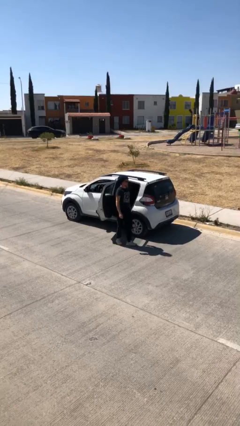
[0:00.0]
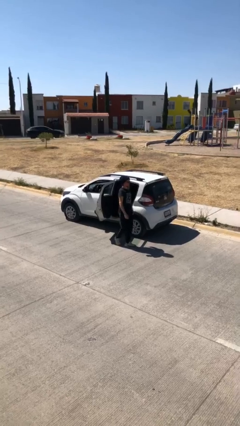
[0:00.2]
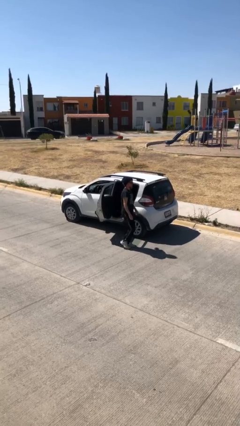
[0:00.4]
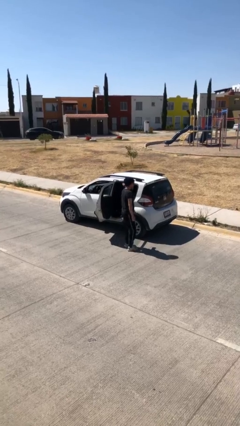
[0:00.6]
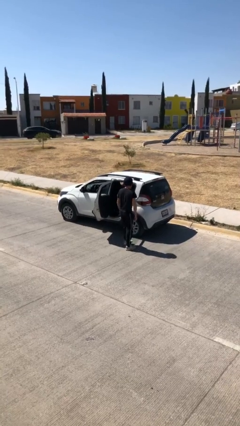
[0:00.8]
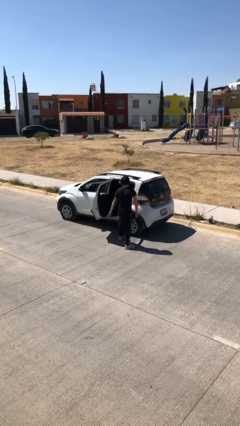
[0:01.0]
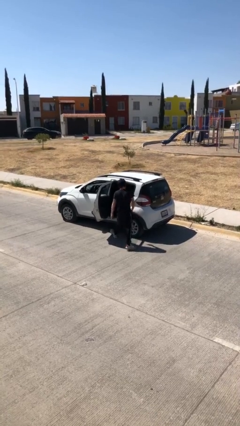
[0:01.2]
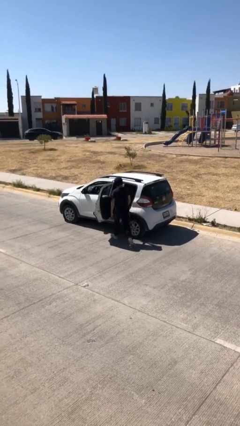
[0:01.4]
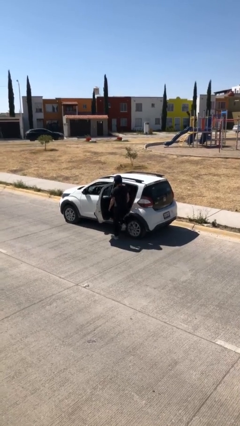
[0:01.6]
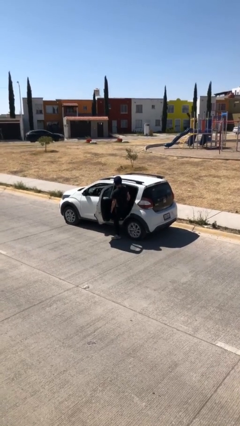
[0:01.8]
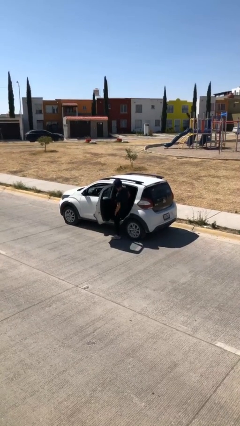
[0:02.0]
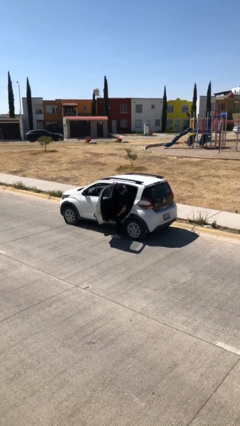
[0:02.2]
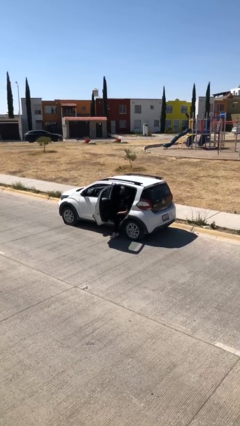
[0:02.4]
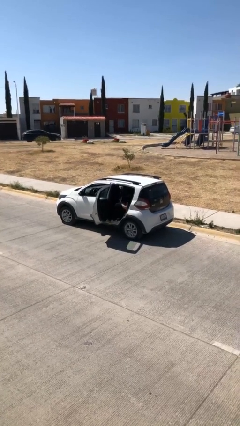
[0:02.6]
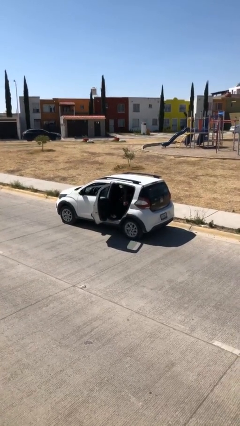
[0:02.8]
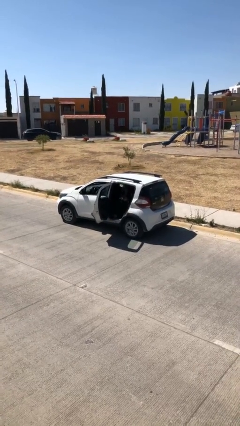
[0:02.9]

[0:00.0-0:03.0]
person enters car

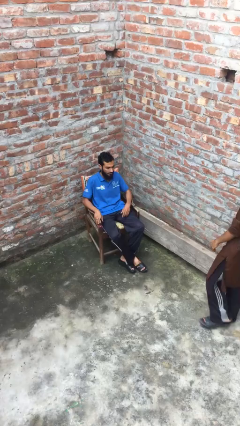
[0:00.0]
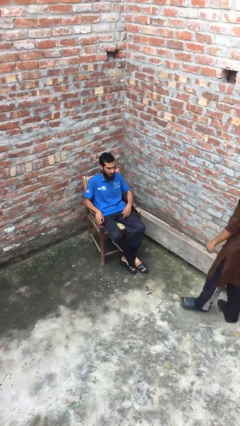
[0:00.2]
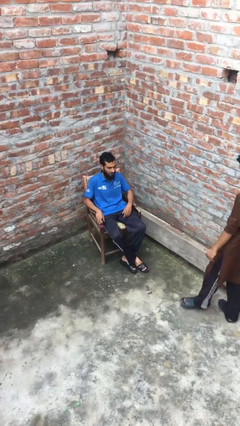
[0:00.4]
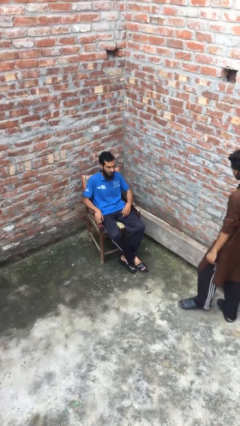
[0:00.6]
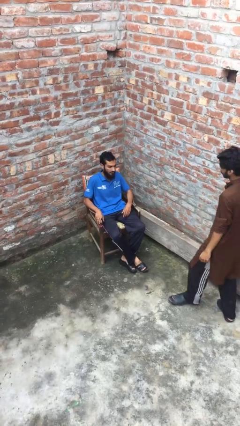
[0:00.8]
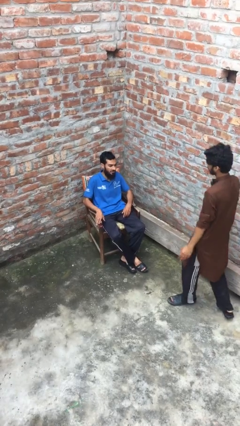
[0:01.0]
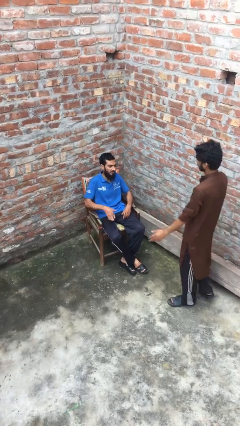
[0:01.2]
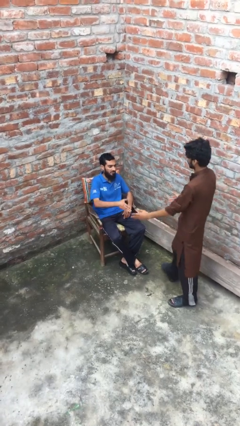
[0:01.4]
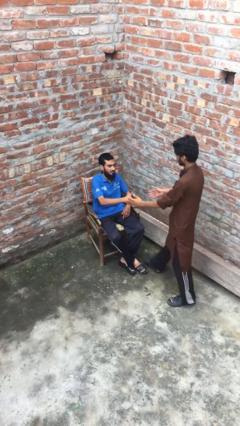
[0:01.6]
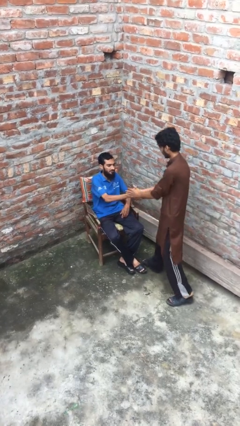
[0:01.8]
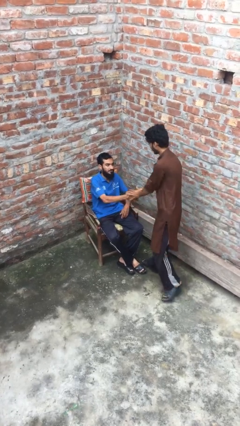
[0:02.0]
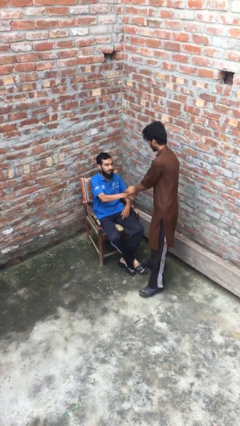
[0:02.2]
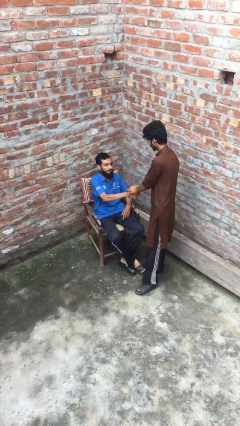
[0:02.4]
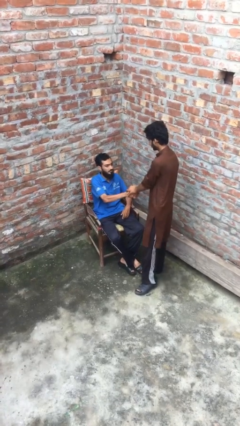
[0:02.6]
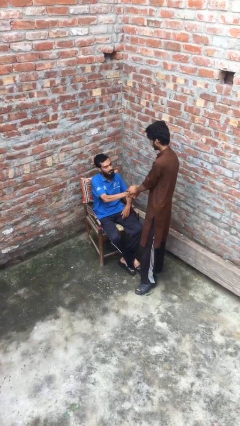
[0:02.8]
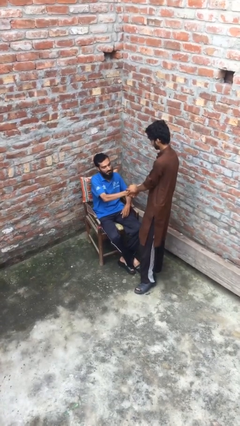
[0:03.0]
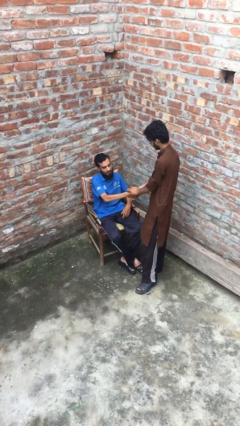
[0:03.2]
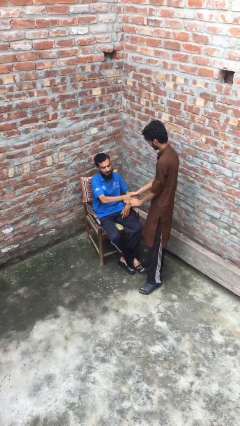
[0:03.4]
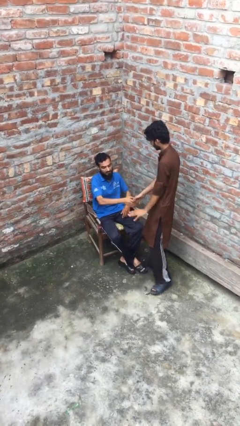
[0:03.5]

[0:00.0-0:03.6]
person shakes hand

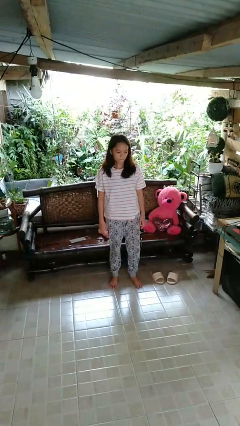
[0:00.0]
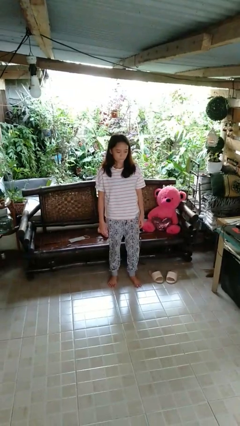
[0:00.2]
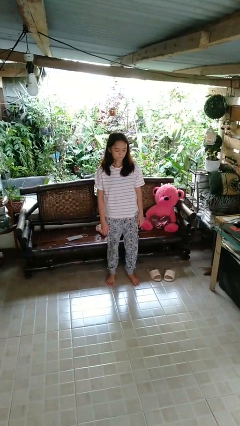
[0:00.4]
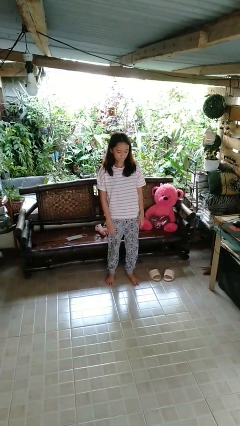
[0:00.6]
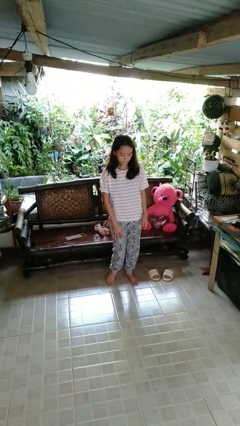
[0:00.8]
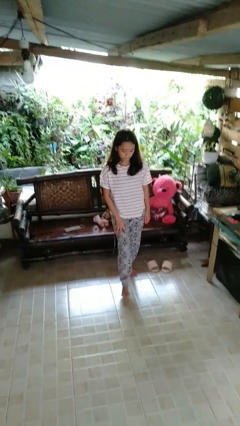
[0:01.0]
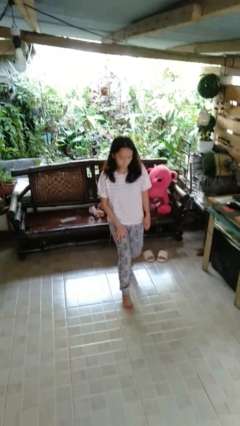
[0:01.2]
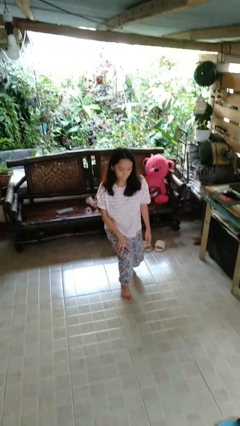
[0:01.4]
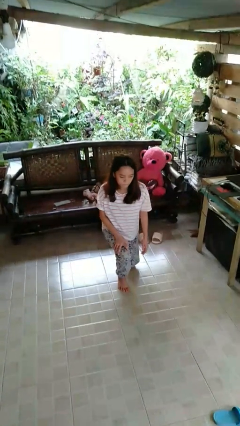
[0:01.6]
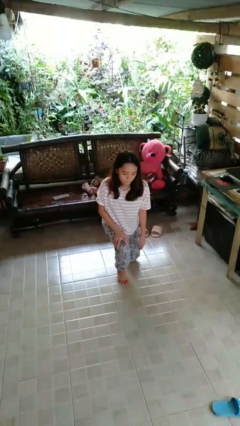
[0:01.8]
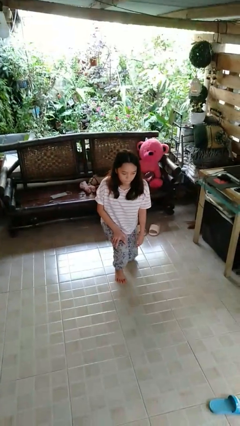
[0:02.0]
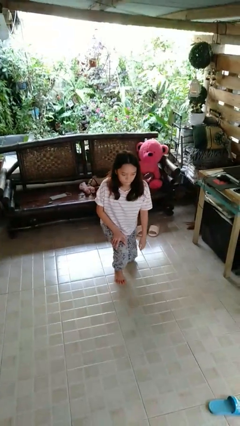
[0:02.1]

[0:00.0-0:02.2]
person kneels

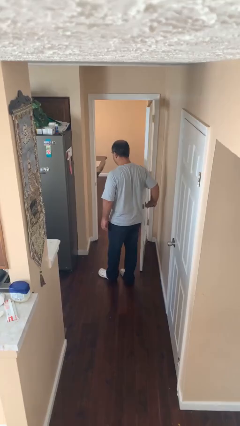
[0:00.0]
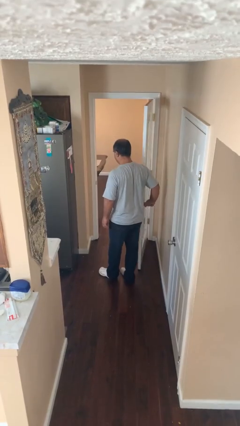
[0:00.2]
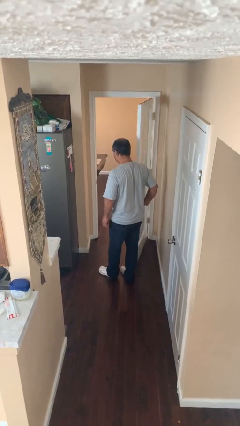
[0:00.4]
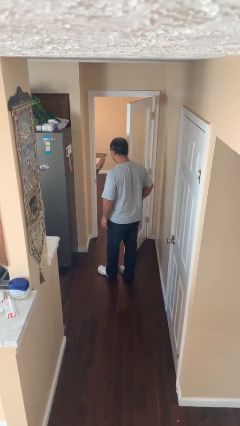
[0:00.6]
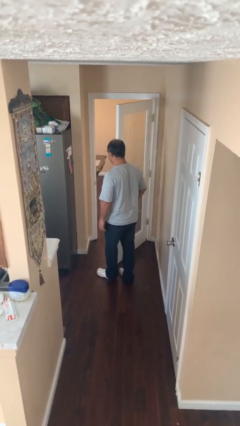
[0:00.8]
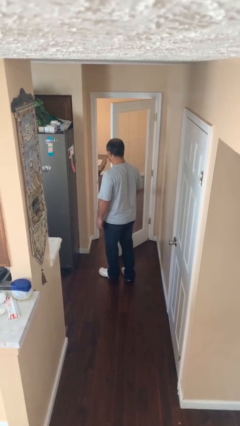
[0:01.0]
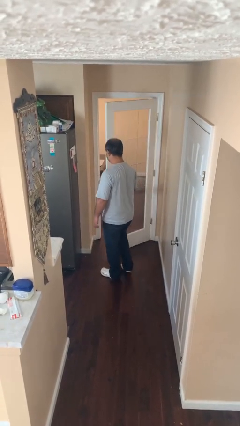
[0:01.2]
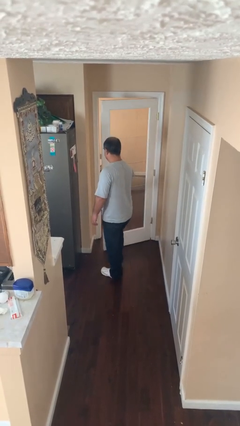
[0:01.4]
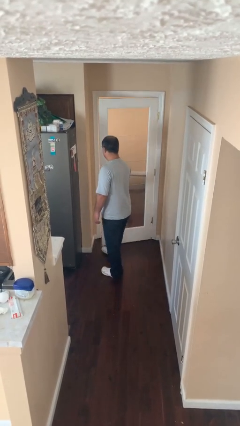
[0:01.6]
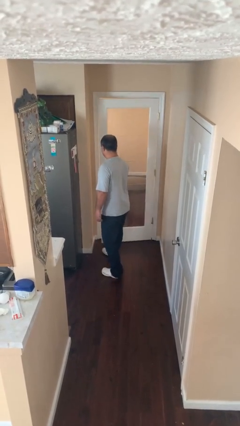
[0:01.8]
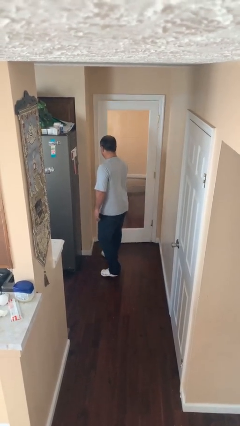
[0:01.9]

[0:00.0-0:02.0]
person closes facility door

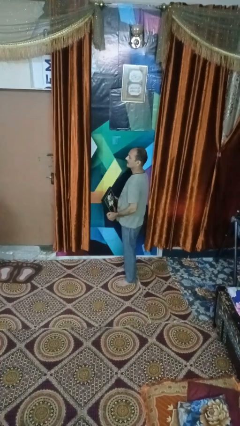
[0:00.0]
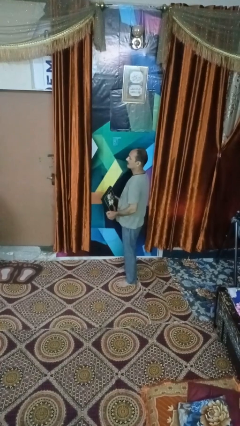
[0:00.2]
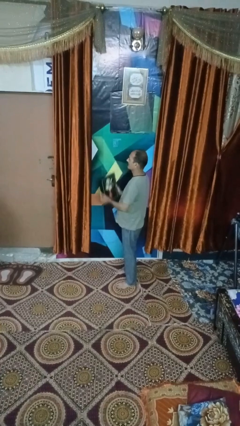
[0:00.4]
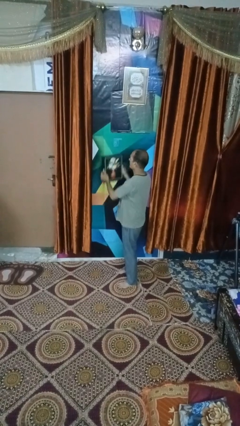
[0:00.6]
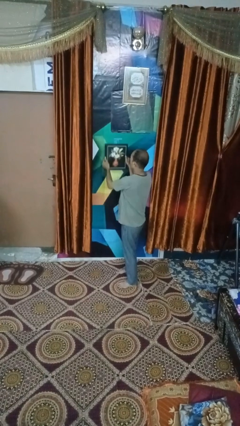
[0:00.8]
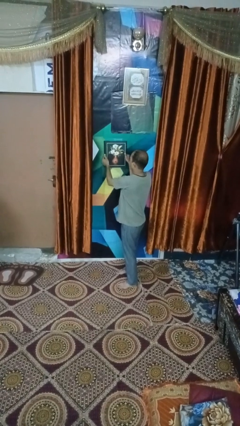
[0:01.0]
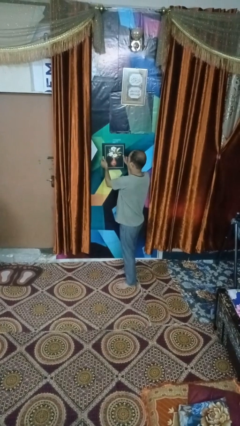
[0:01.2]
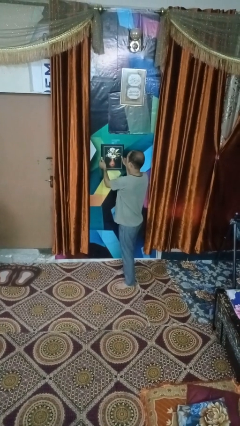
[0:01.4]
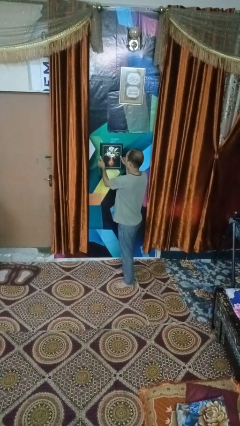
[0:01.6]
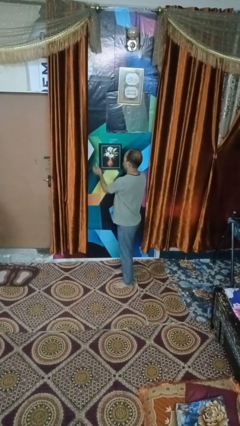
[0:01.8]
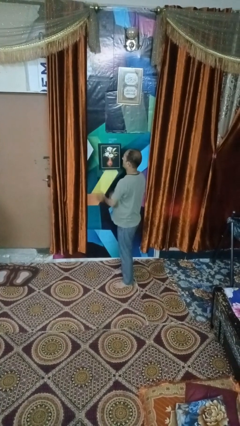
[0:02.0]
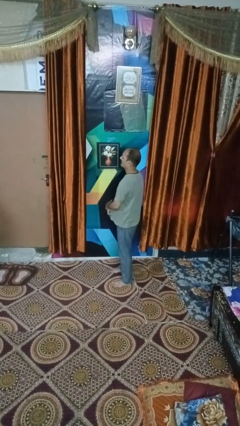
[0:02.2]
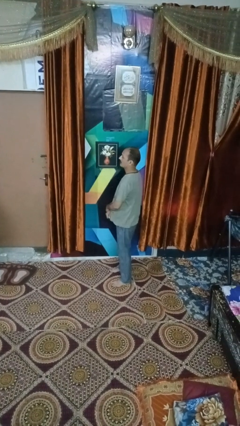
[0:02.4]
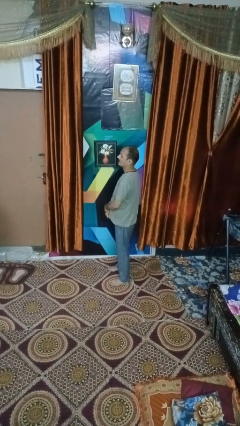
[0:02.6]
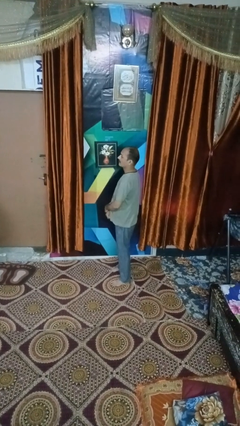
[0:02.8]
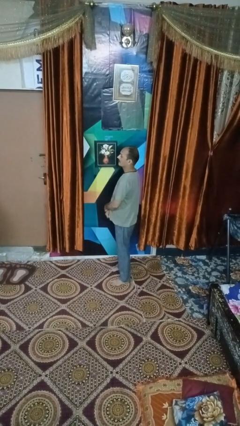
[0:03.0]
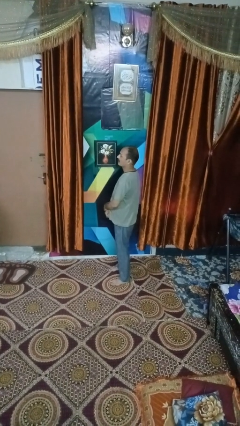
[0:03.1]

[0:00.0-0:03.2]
person puts up picture frame

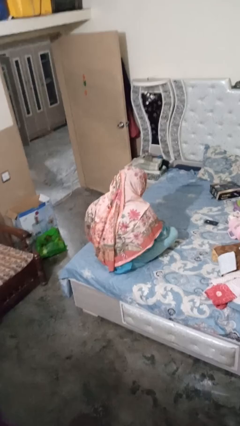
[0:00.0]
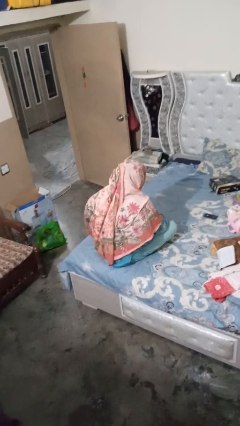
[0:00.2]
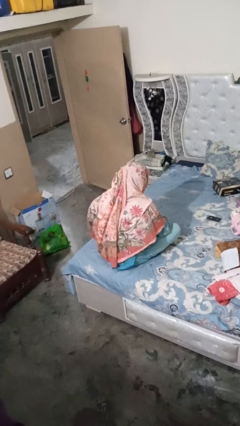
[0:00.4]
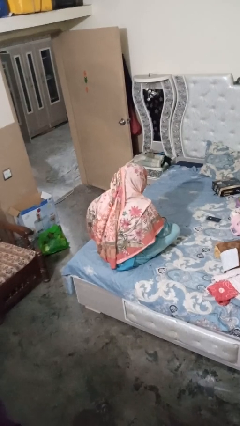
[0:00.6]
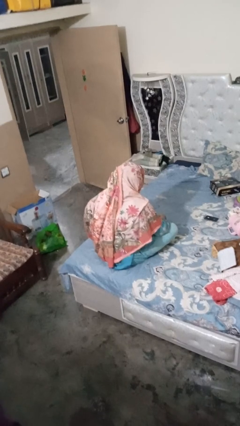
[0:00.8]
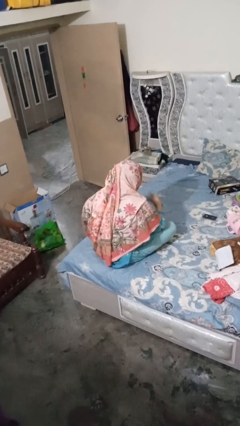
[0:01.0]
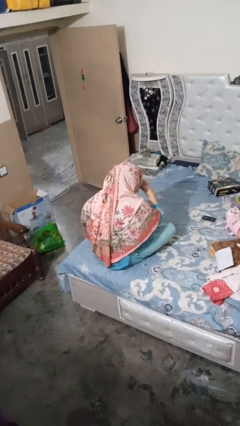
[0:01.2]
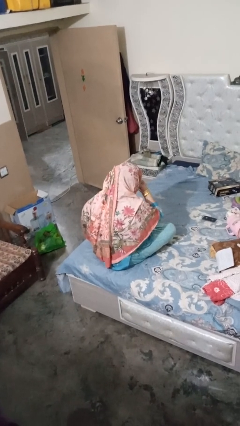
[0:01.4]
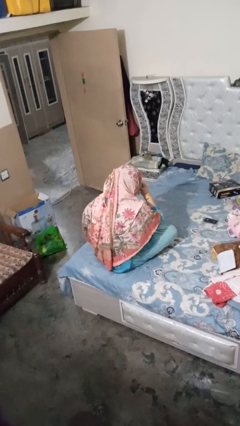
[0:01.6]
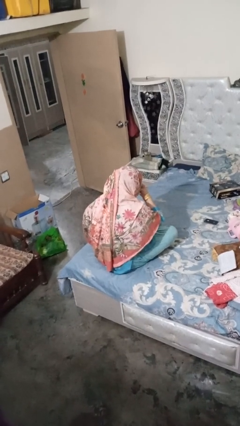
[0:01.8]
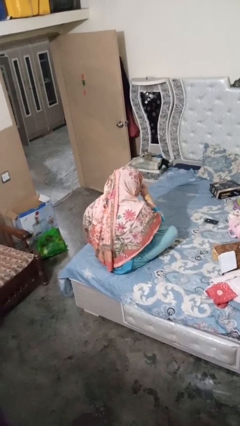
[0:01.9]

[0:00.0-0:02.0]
person blows nose

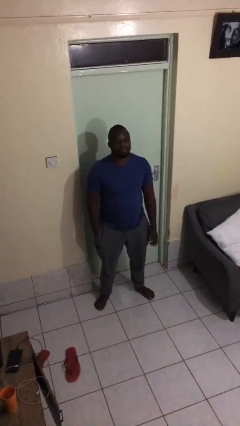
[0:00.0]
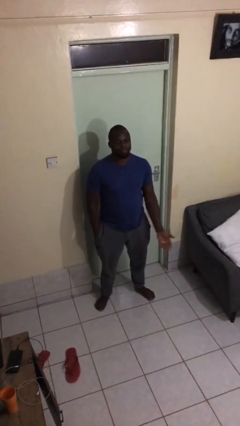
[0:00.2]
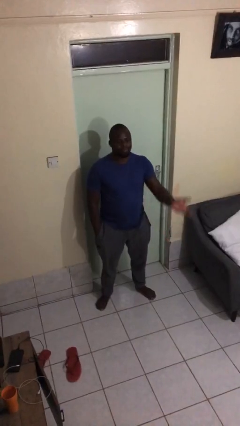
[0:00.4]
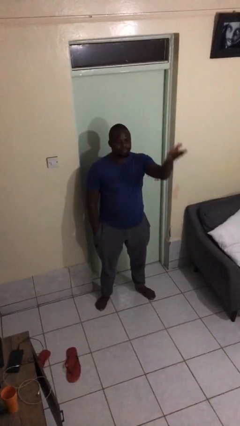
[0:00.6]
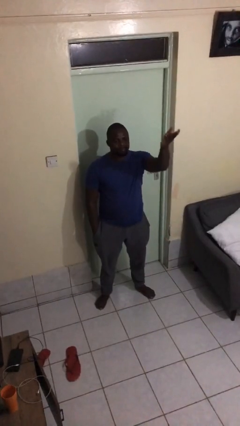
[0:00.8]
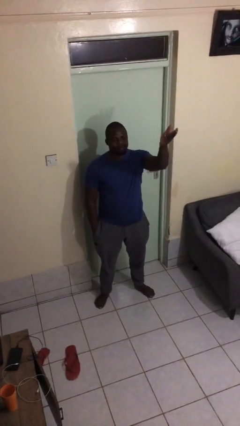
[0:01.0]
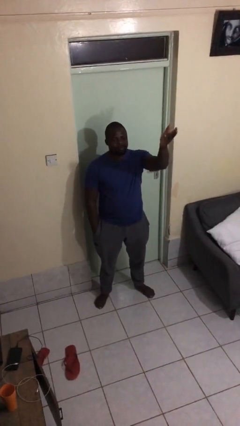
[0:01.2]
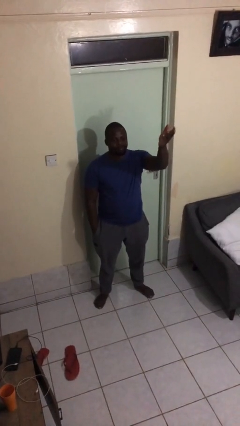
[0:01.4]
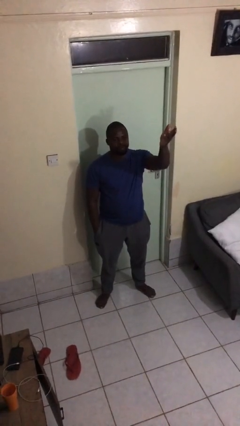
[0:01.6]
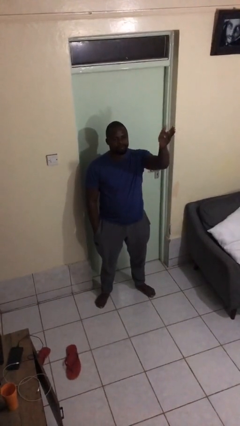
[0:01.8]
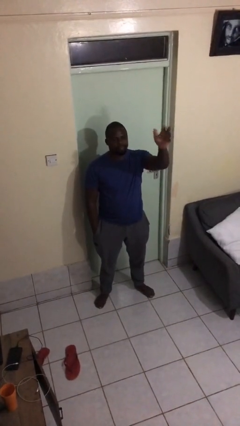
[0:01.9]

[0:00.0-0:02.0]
person gestures swipe up
